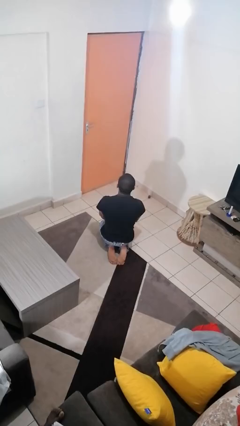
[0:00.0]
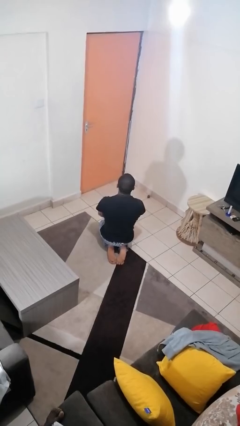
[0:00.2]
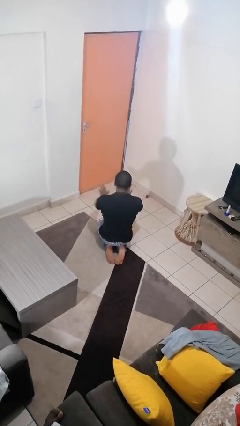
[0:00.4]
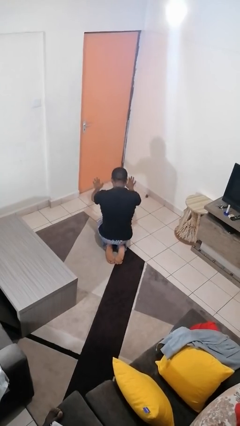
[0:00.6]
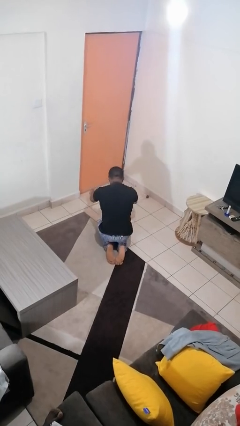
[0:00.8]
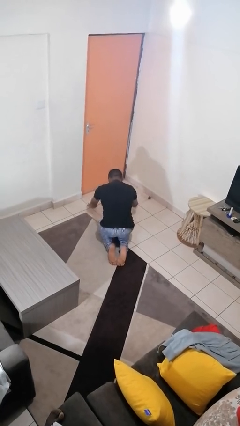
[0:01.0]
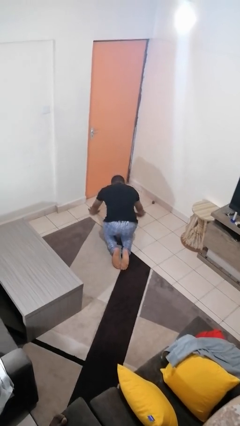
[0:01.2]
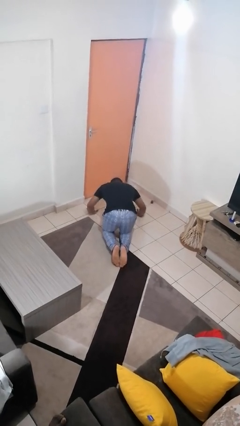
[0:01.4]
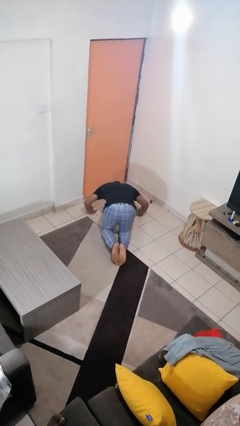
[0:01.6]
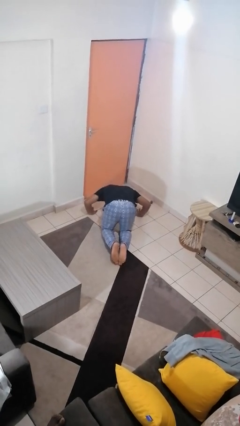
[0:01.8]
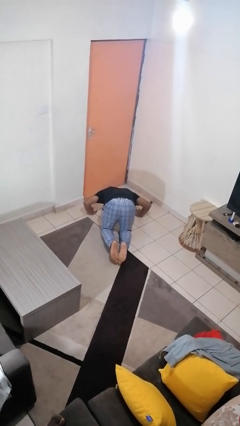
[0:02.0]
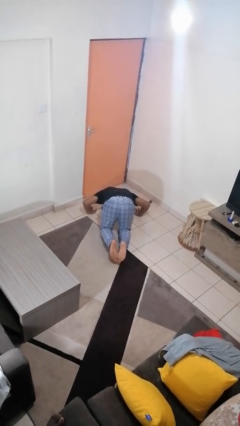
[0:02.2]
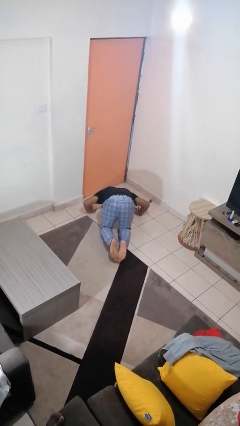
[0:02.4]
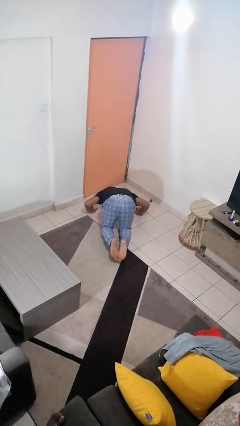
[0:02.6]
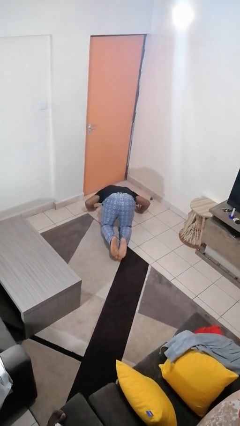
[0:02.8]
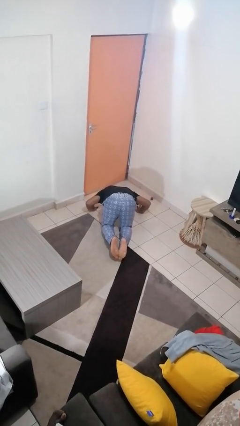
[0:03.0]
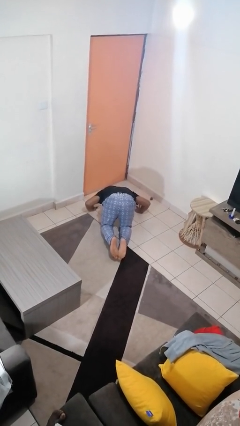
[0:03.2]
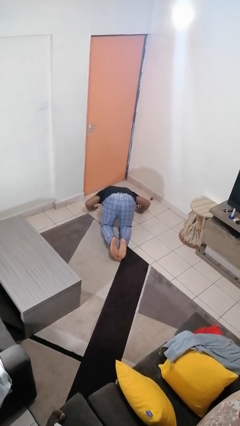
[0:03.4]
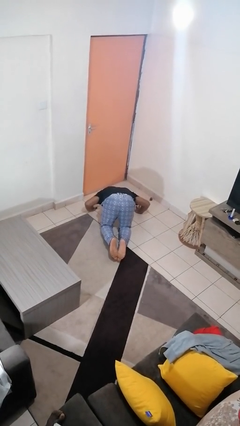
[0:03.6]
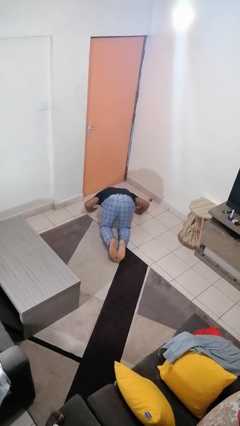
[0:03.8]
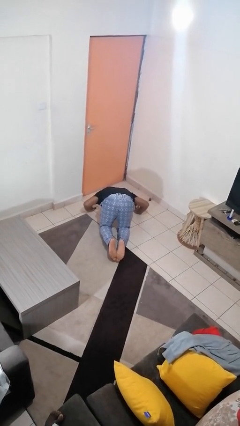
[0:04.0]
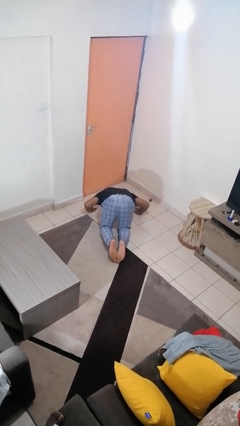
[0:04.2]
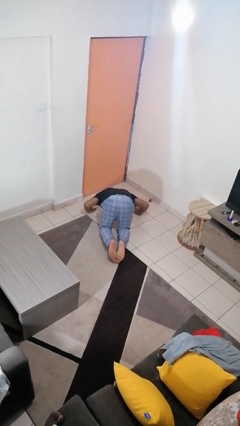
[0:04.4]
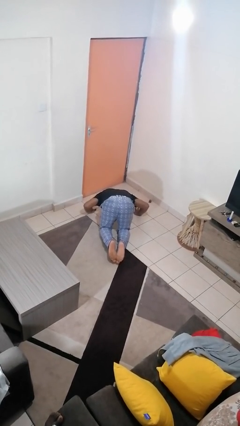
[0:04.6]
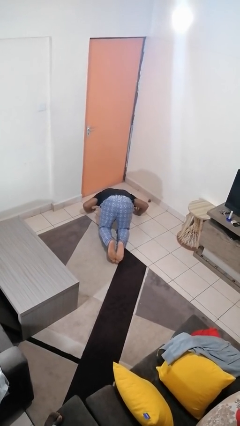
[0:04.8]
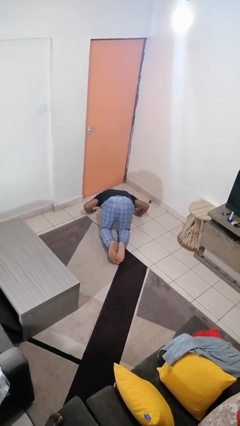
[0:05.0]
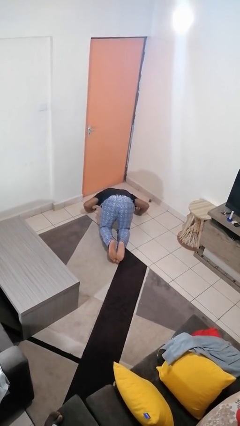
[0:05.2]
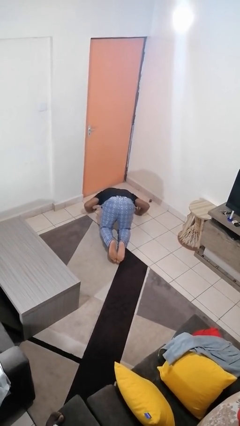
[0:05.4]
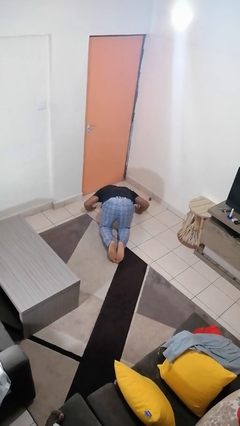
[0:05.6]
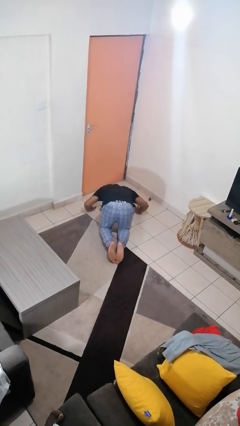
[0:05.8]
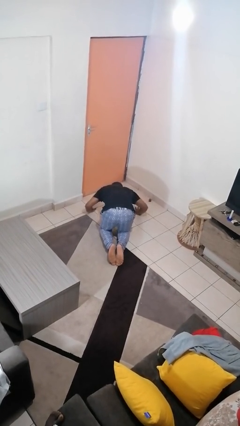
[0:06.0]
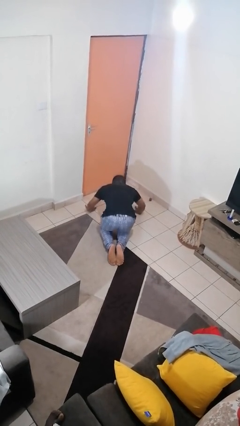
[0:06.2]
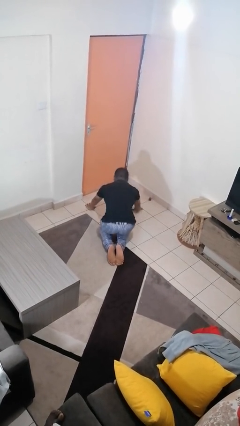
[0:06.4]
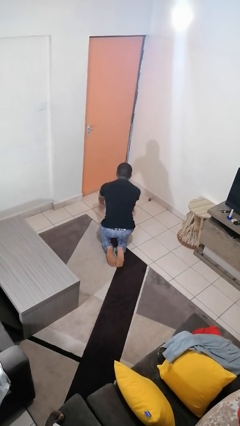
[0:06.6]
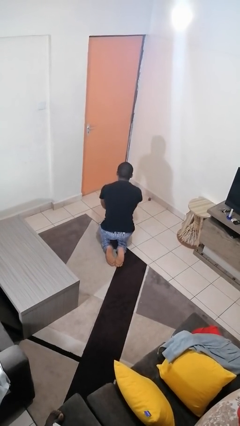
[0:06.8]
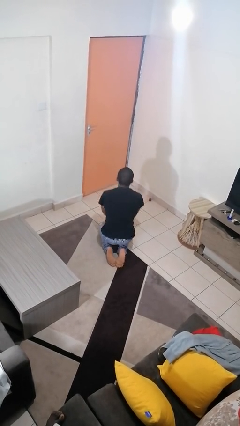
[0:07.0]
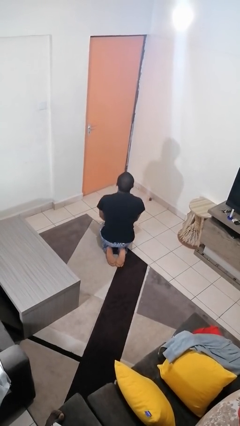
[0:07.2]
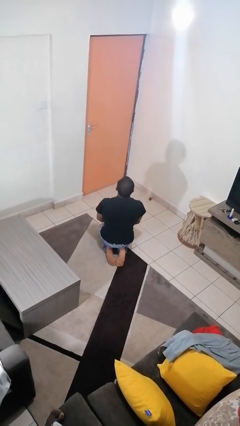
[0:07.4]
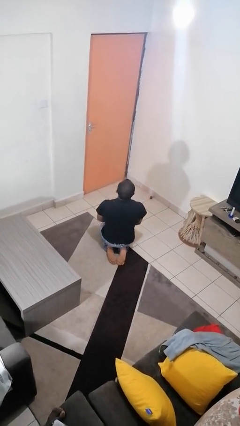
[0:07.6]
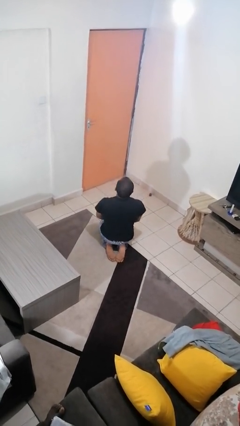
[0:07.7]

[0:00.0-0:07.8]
person prays

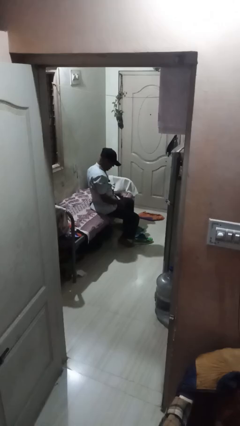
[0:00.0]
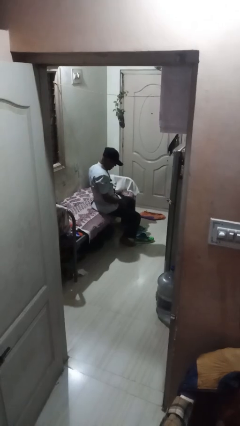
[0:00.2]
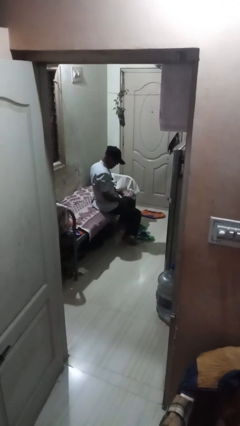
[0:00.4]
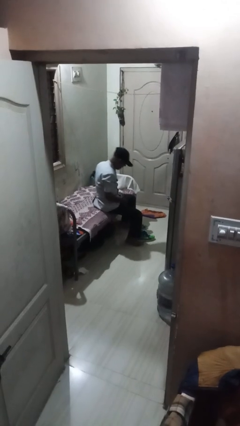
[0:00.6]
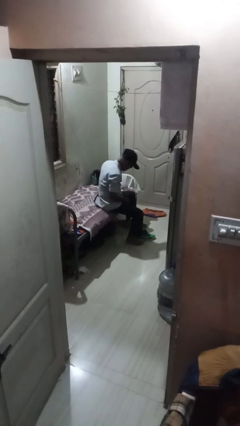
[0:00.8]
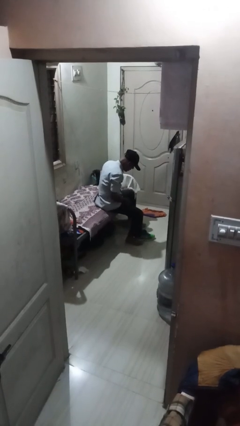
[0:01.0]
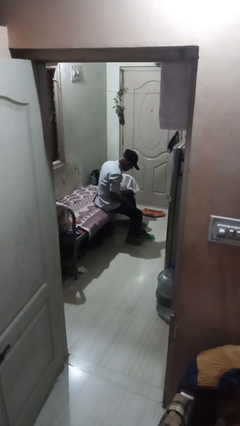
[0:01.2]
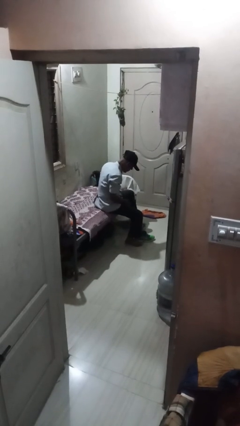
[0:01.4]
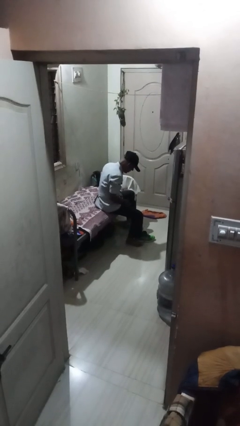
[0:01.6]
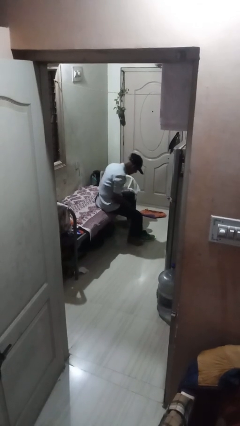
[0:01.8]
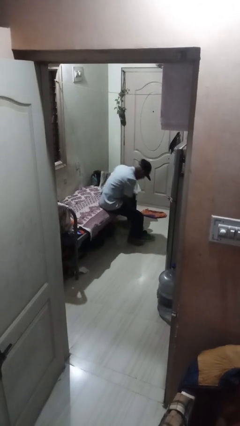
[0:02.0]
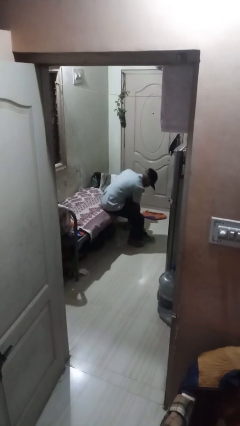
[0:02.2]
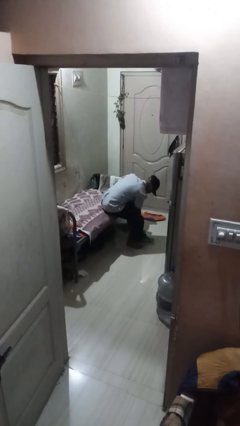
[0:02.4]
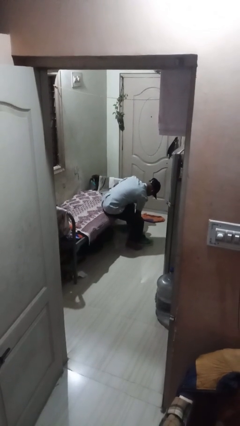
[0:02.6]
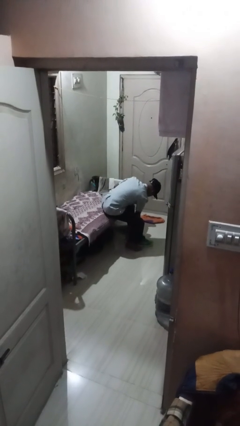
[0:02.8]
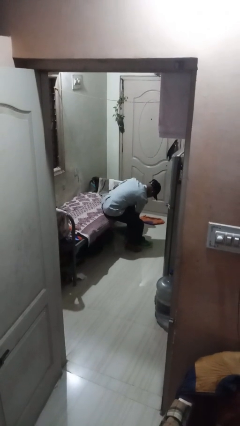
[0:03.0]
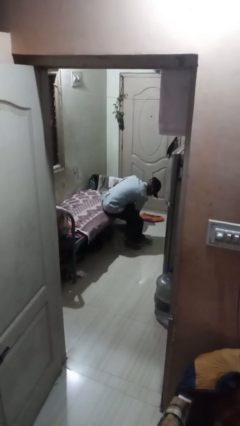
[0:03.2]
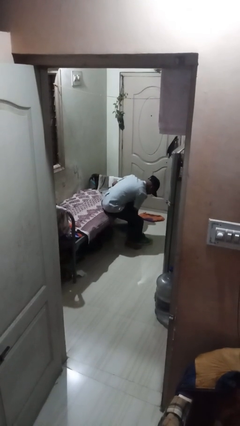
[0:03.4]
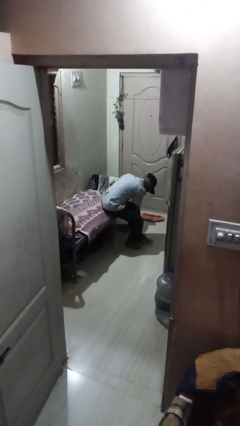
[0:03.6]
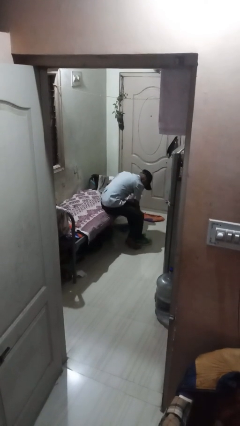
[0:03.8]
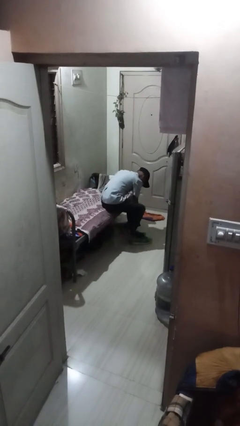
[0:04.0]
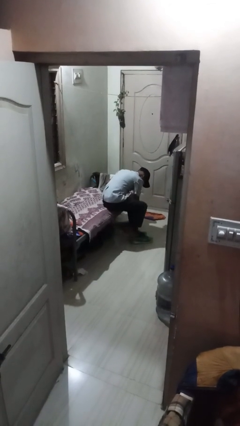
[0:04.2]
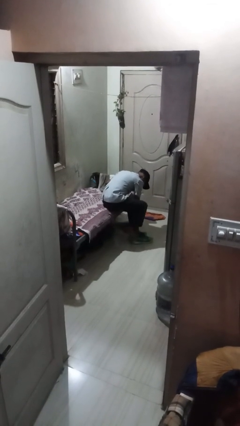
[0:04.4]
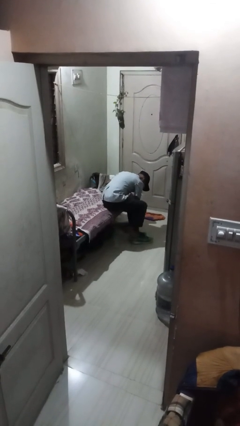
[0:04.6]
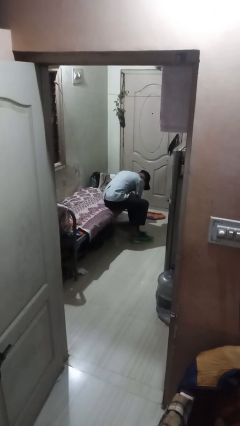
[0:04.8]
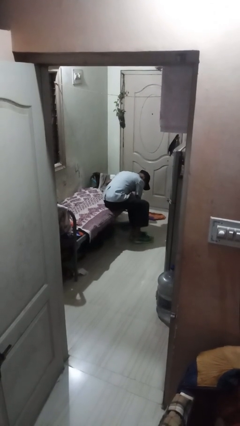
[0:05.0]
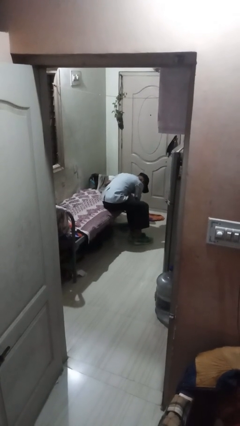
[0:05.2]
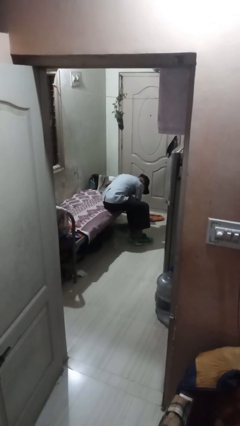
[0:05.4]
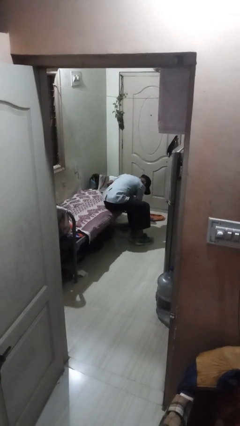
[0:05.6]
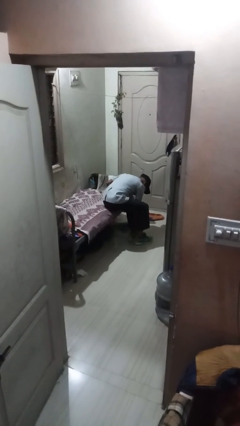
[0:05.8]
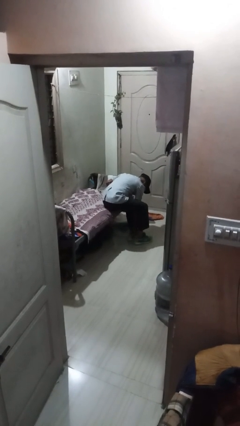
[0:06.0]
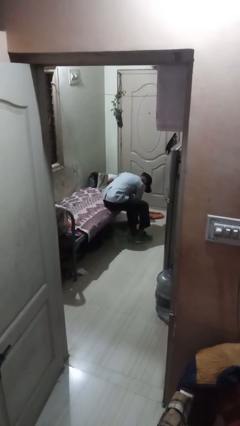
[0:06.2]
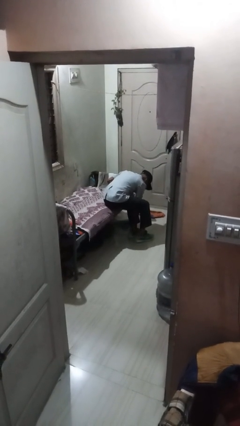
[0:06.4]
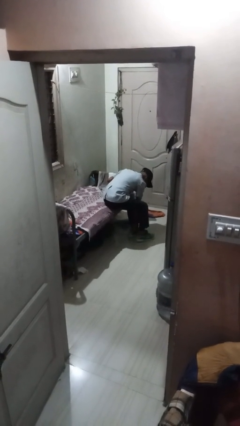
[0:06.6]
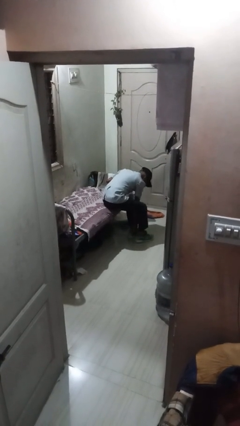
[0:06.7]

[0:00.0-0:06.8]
person puts on shoes

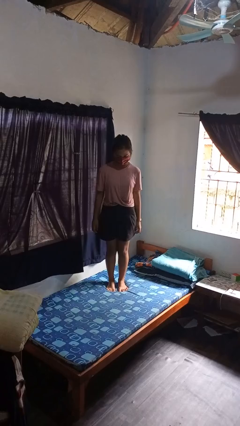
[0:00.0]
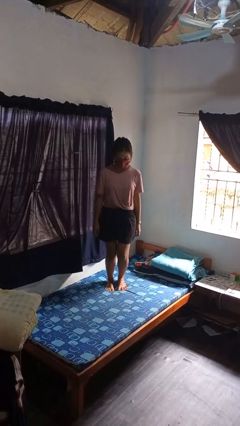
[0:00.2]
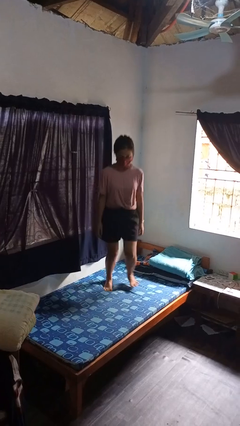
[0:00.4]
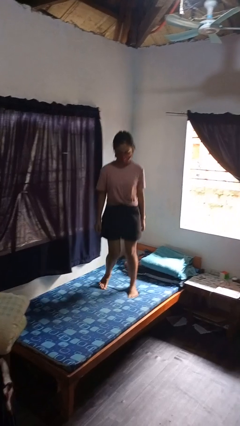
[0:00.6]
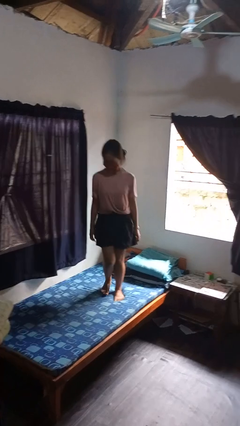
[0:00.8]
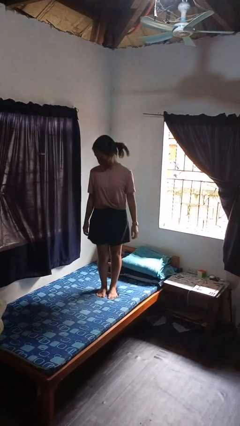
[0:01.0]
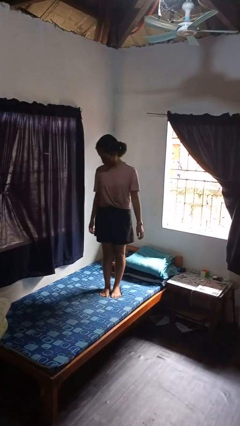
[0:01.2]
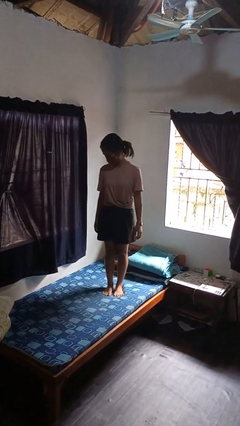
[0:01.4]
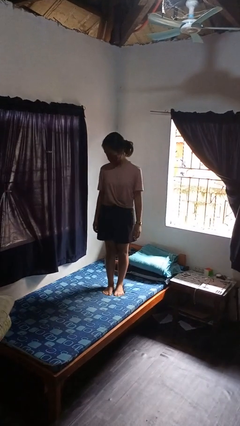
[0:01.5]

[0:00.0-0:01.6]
person jumps on bed

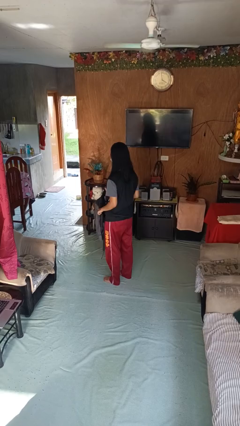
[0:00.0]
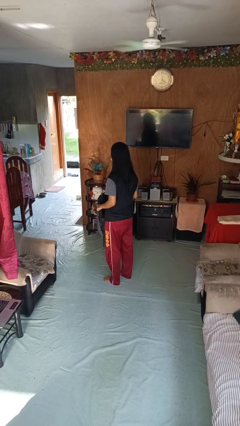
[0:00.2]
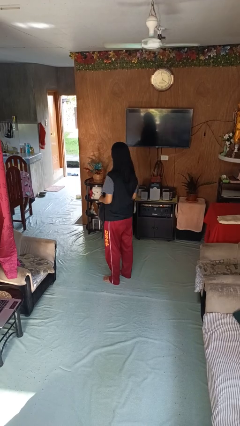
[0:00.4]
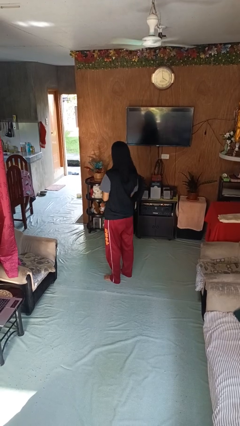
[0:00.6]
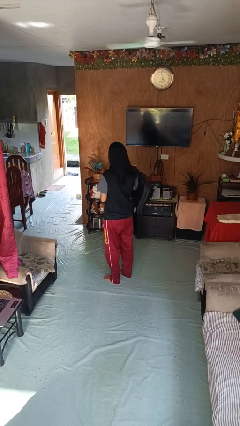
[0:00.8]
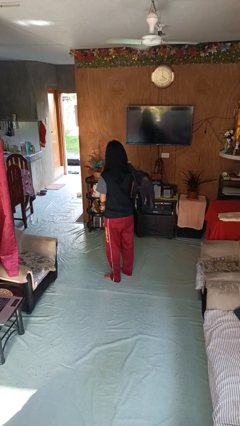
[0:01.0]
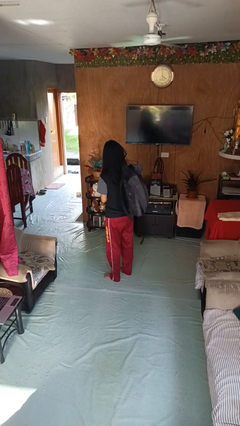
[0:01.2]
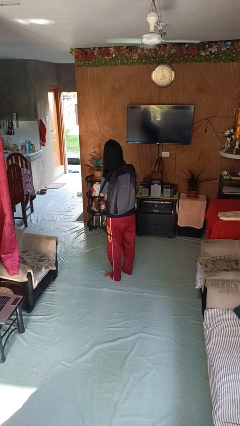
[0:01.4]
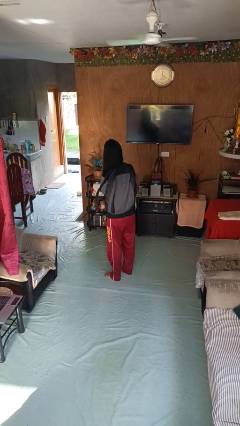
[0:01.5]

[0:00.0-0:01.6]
person puts on backpack
